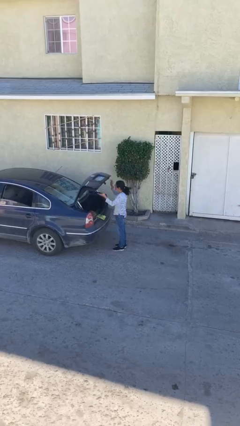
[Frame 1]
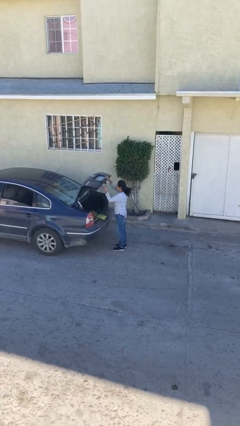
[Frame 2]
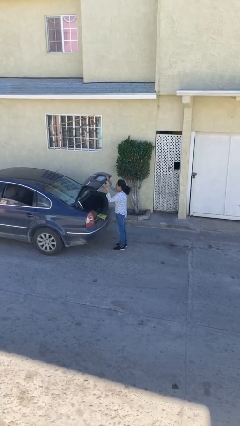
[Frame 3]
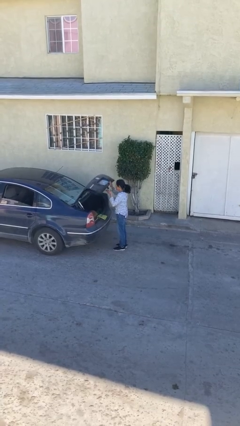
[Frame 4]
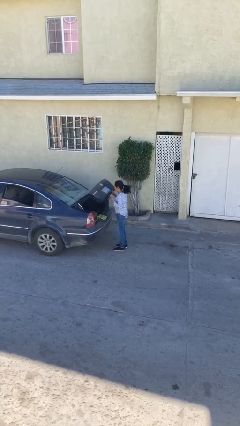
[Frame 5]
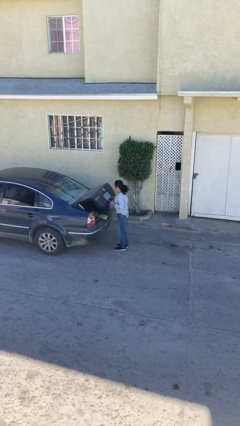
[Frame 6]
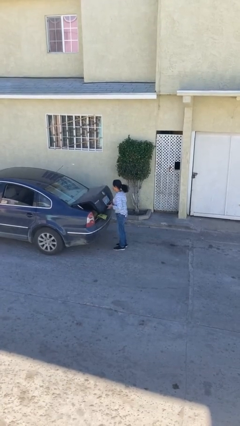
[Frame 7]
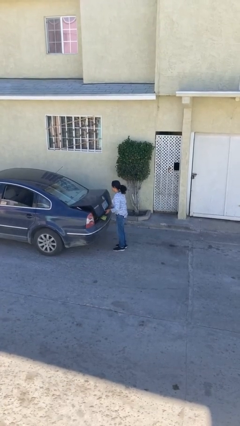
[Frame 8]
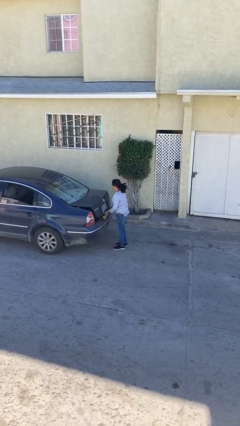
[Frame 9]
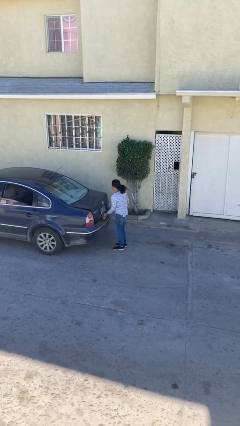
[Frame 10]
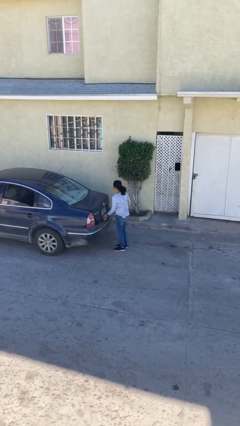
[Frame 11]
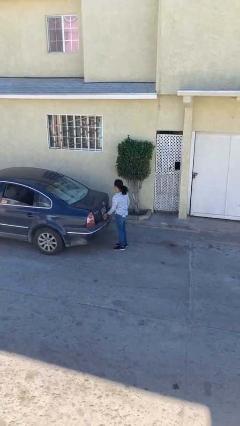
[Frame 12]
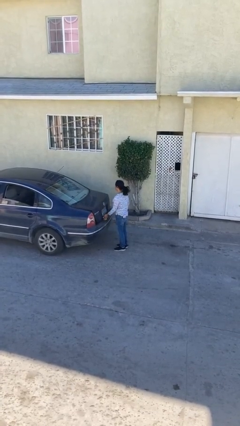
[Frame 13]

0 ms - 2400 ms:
person closes car trunk

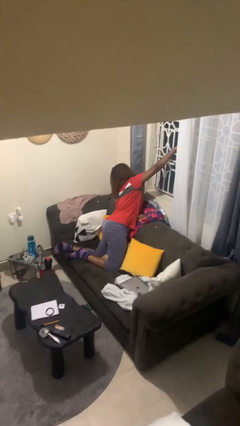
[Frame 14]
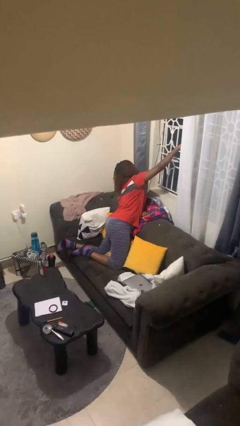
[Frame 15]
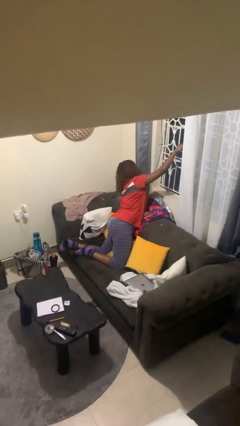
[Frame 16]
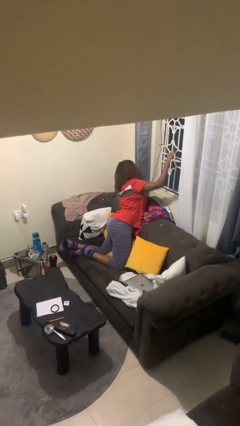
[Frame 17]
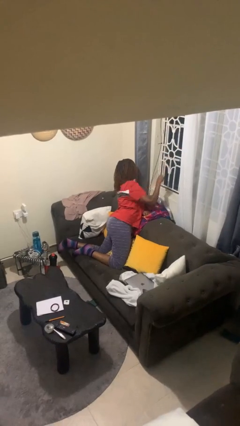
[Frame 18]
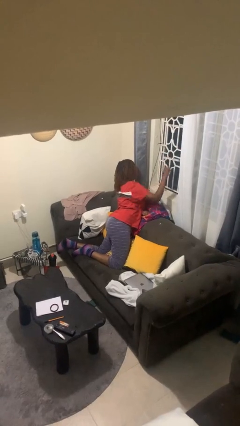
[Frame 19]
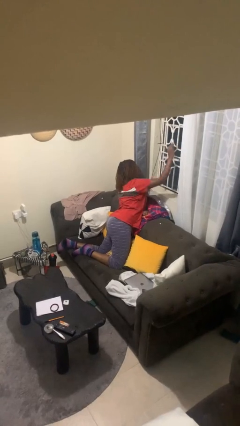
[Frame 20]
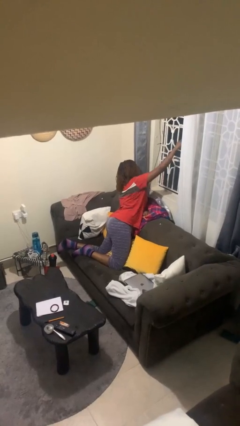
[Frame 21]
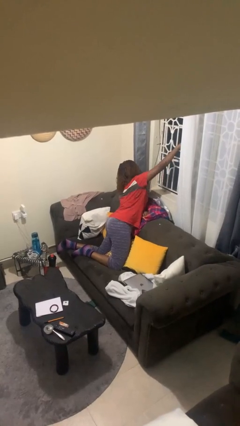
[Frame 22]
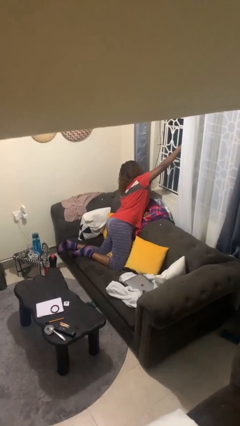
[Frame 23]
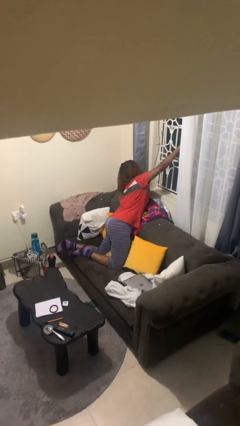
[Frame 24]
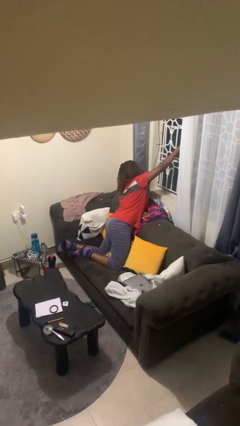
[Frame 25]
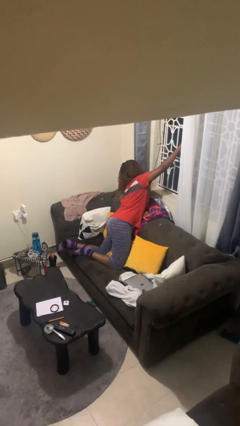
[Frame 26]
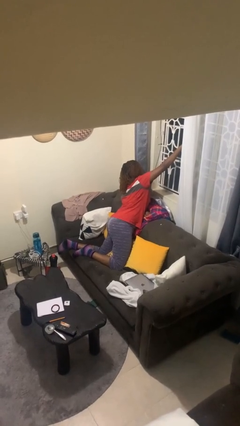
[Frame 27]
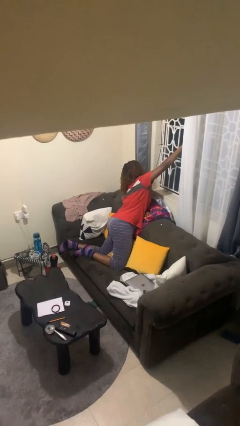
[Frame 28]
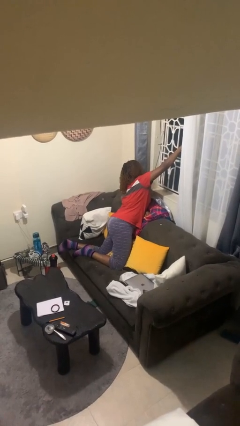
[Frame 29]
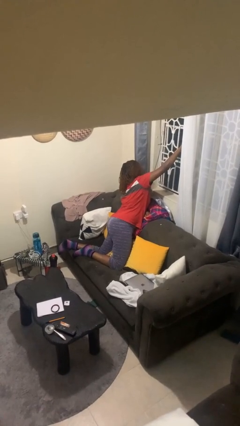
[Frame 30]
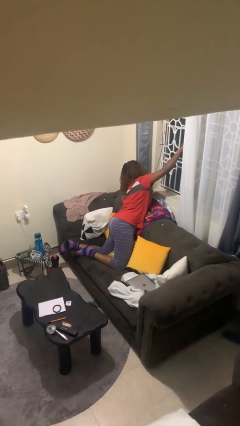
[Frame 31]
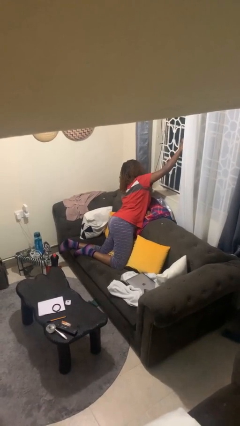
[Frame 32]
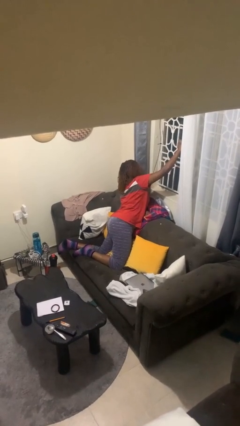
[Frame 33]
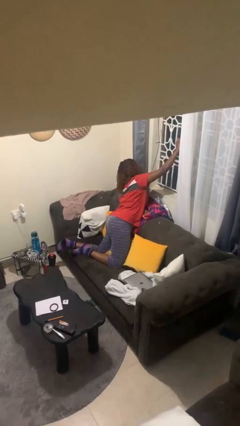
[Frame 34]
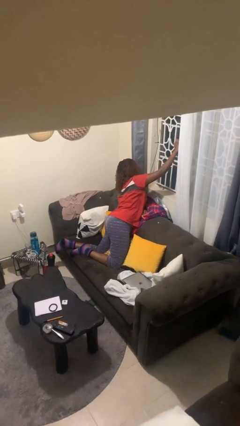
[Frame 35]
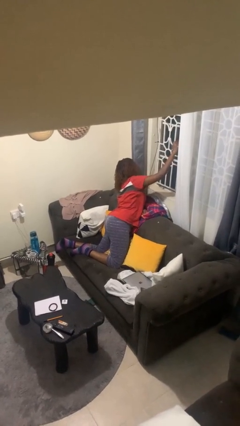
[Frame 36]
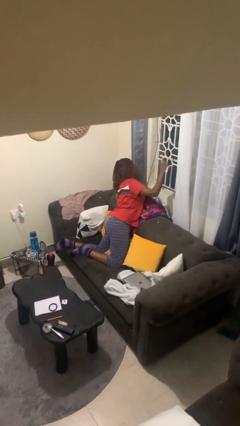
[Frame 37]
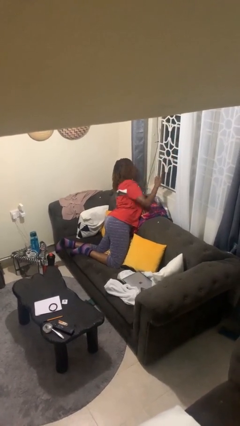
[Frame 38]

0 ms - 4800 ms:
person closes home window

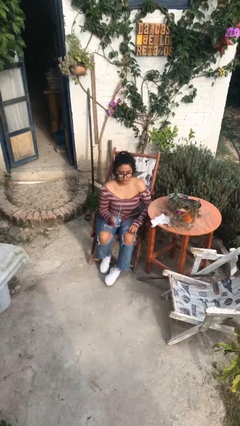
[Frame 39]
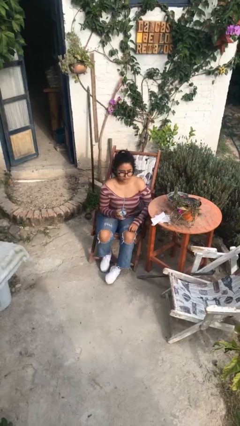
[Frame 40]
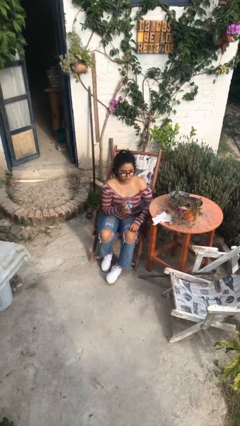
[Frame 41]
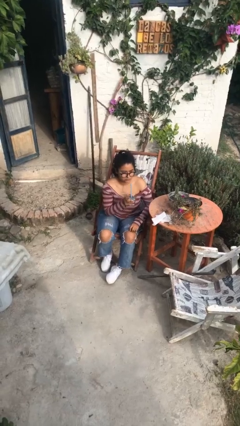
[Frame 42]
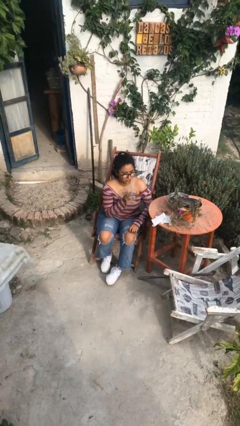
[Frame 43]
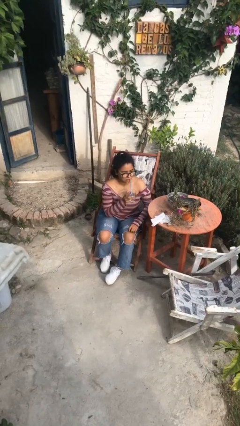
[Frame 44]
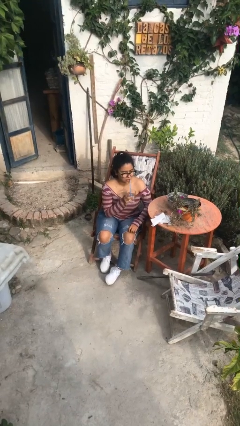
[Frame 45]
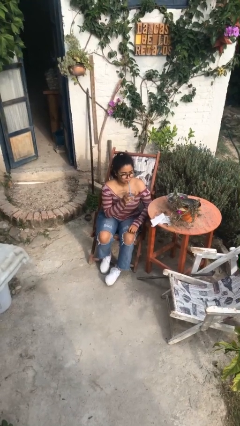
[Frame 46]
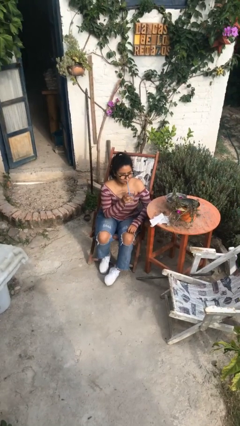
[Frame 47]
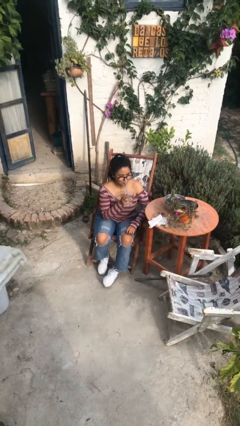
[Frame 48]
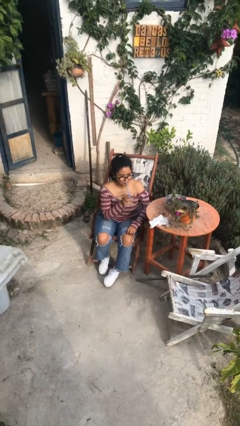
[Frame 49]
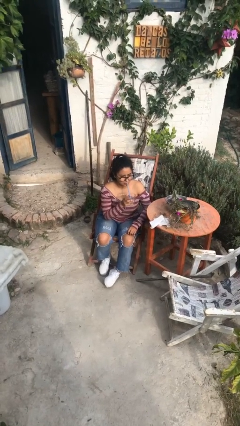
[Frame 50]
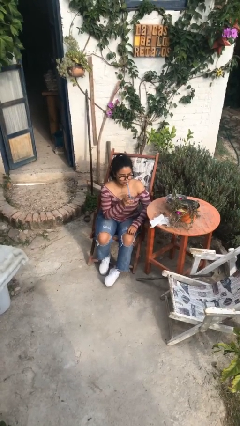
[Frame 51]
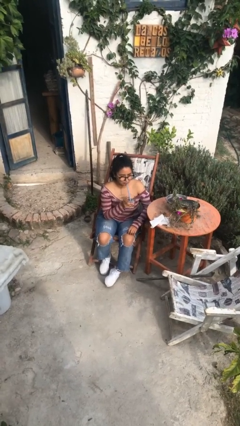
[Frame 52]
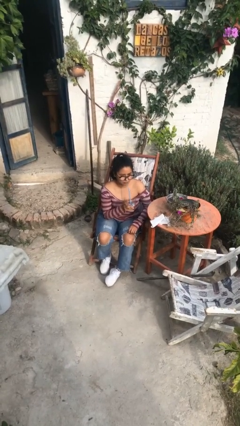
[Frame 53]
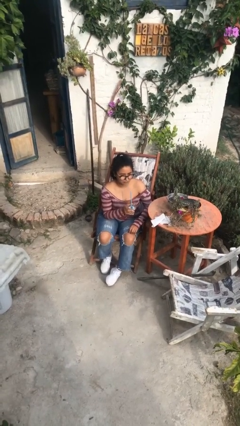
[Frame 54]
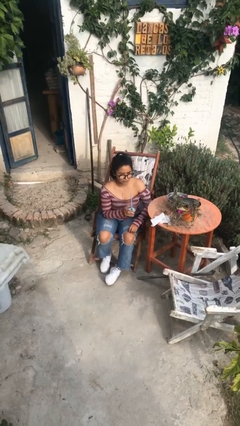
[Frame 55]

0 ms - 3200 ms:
person drinks from straw

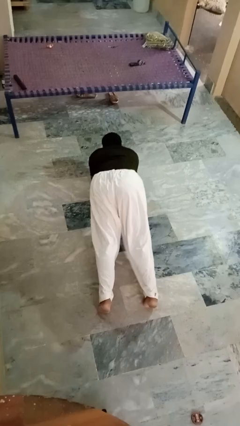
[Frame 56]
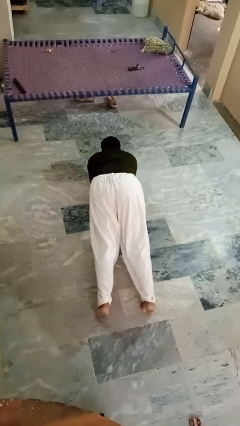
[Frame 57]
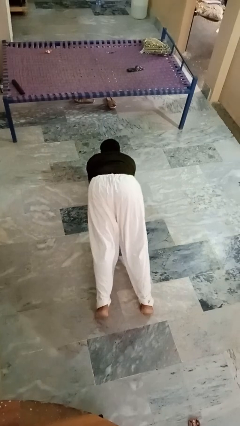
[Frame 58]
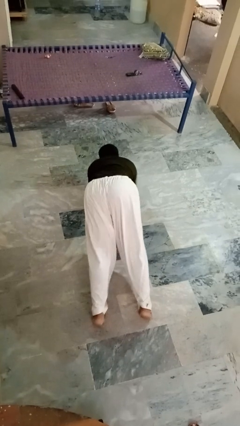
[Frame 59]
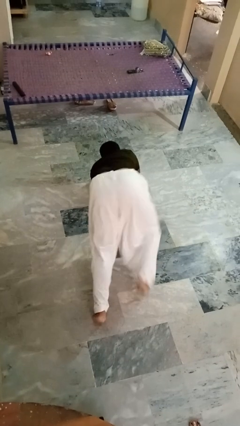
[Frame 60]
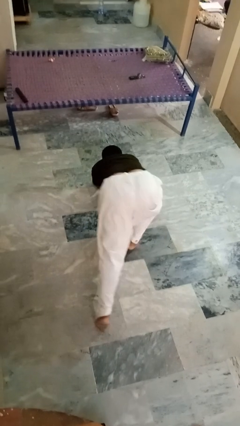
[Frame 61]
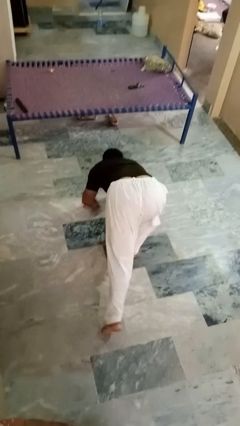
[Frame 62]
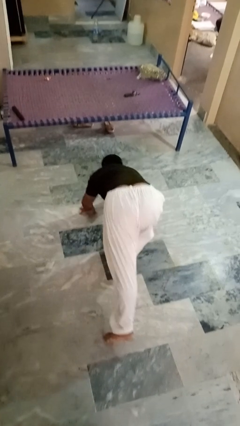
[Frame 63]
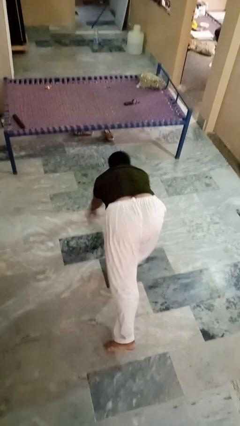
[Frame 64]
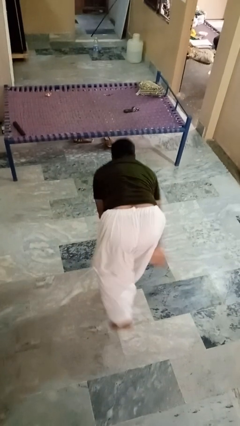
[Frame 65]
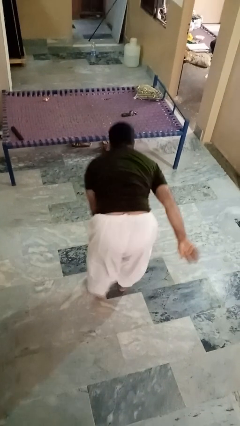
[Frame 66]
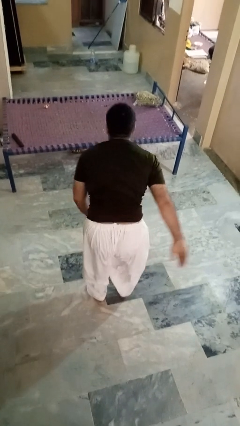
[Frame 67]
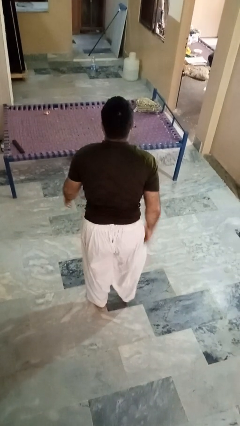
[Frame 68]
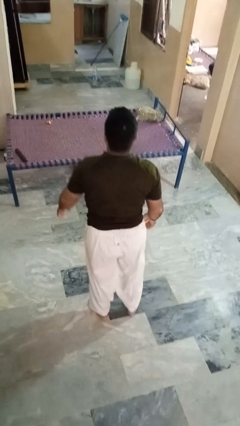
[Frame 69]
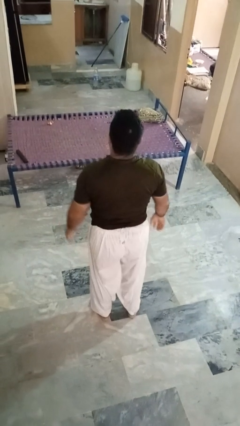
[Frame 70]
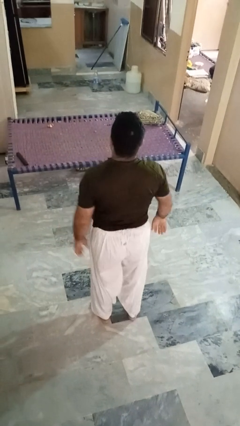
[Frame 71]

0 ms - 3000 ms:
person stands up from floor

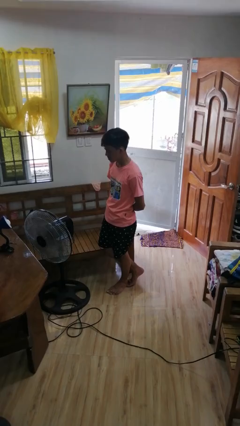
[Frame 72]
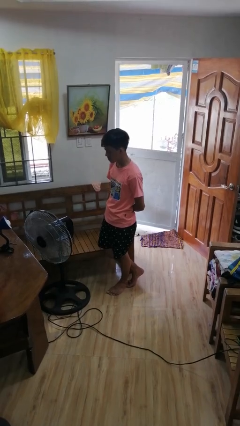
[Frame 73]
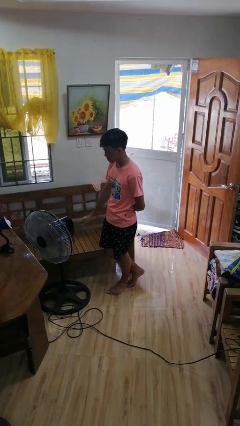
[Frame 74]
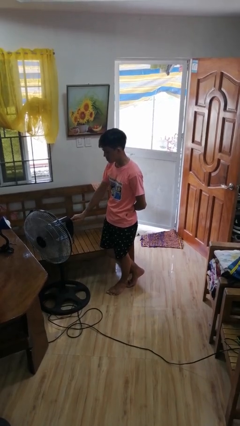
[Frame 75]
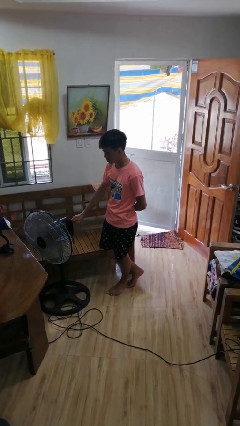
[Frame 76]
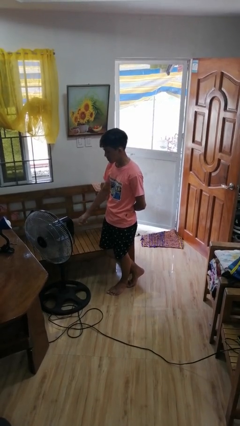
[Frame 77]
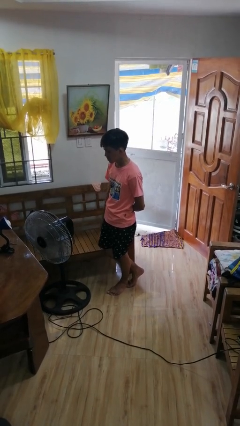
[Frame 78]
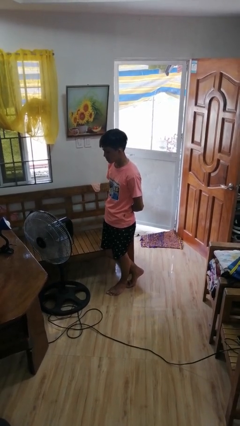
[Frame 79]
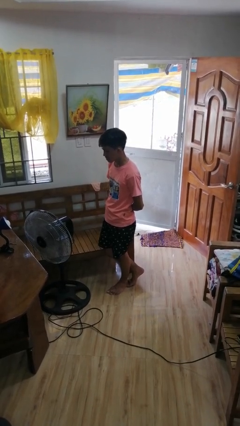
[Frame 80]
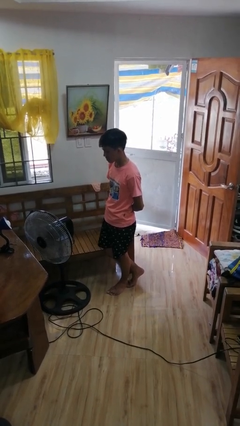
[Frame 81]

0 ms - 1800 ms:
person turns off fan

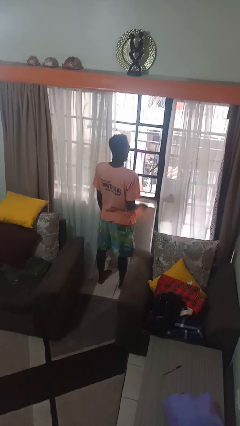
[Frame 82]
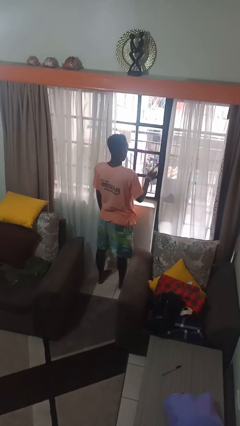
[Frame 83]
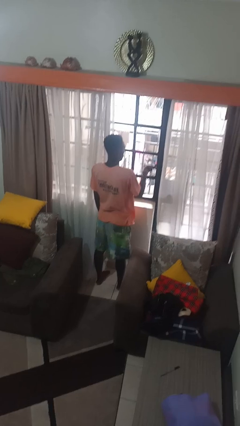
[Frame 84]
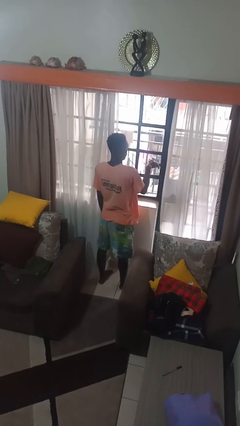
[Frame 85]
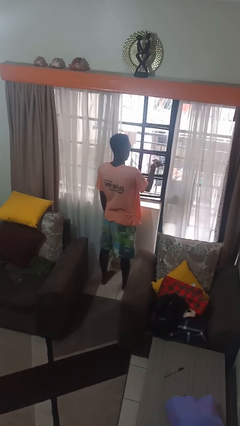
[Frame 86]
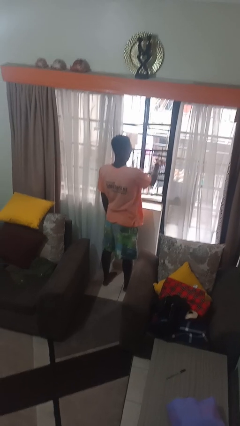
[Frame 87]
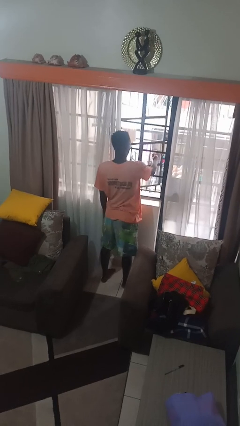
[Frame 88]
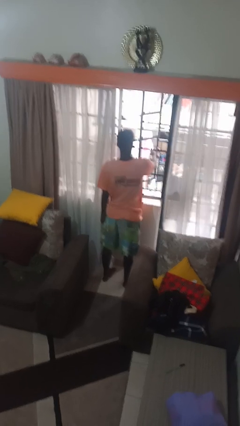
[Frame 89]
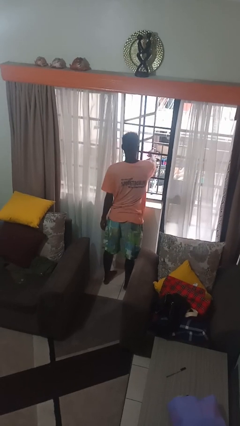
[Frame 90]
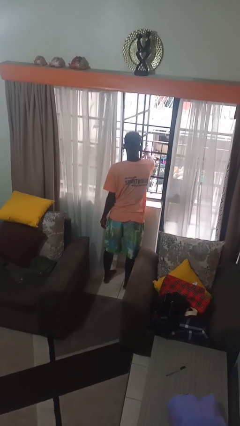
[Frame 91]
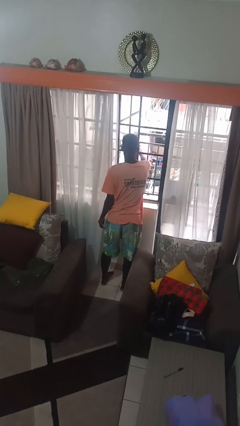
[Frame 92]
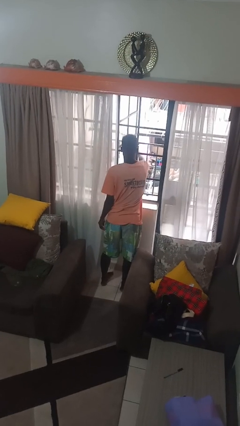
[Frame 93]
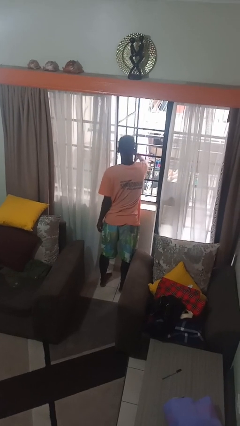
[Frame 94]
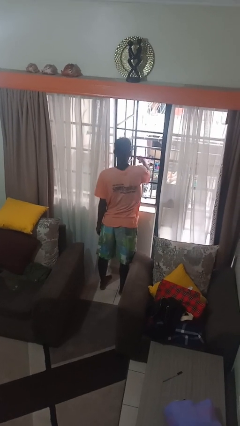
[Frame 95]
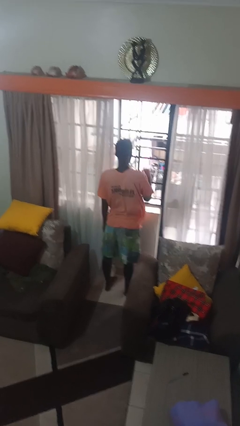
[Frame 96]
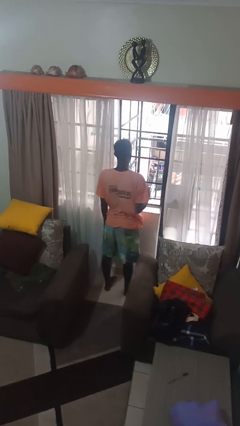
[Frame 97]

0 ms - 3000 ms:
person opens home window
